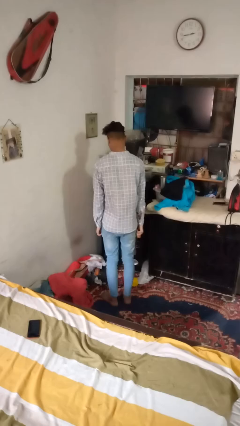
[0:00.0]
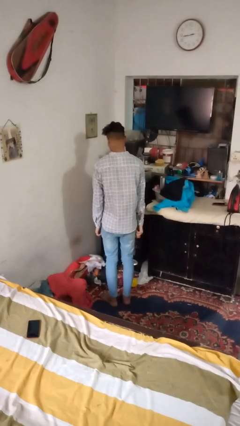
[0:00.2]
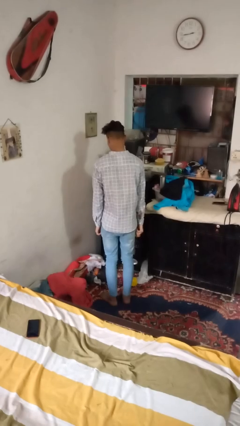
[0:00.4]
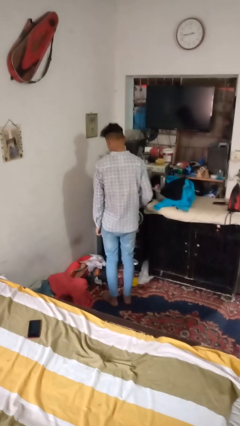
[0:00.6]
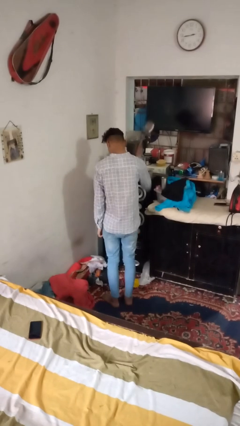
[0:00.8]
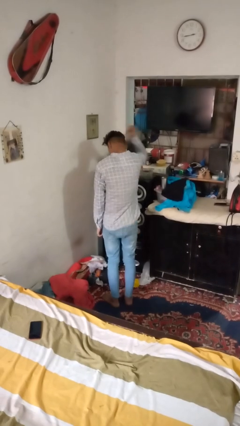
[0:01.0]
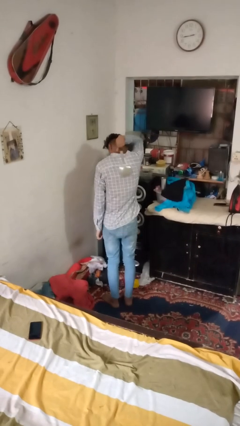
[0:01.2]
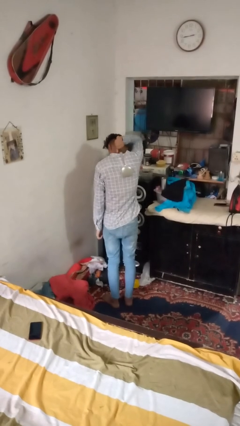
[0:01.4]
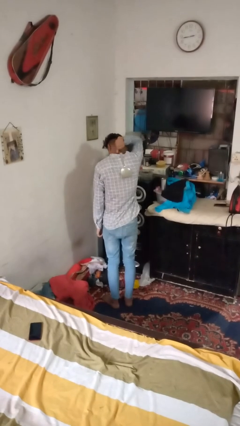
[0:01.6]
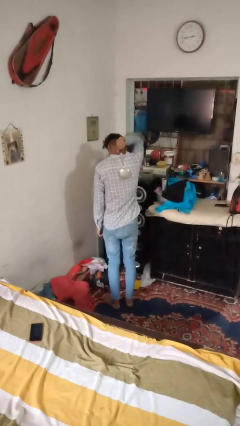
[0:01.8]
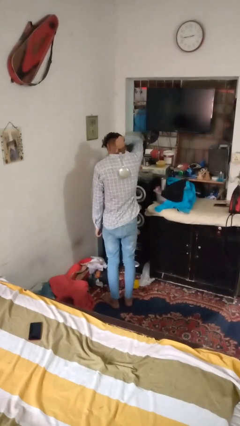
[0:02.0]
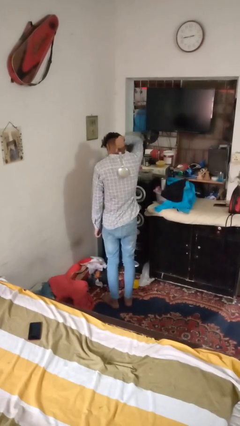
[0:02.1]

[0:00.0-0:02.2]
person swats bug

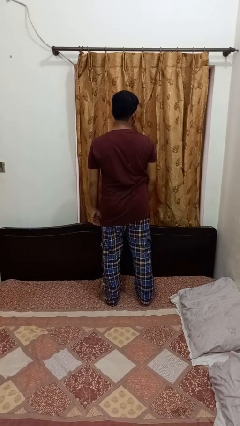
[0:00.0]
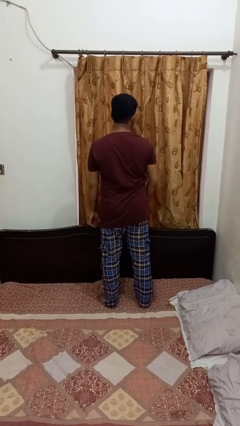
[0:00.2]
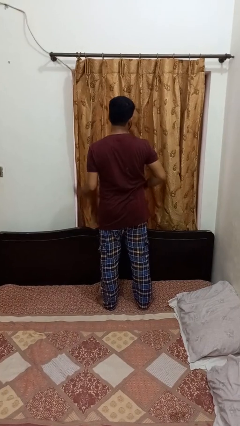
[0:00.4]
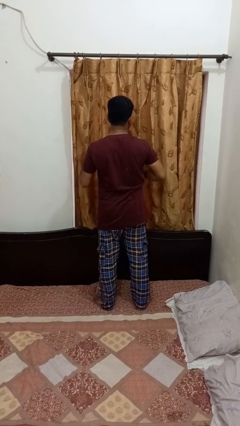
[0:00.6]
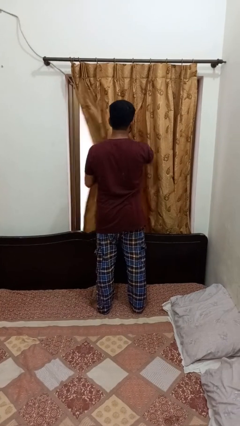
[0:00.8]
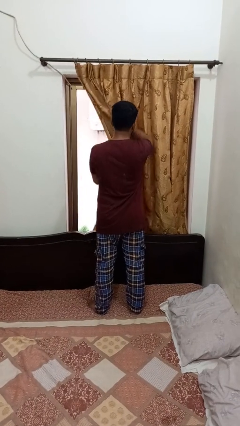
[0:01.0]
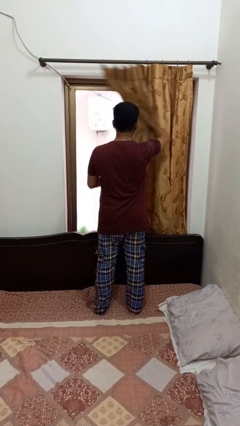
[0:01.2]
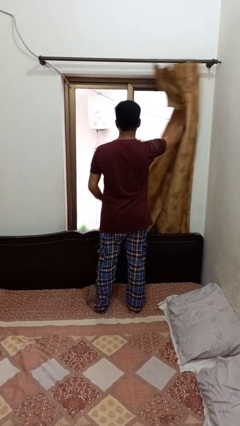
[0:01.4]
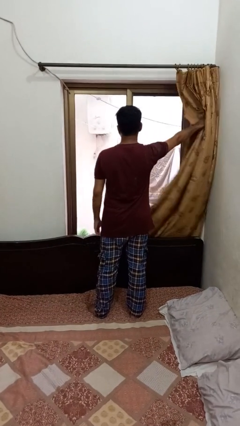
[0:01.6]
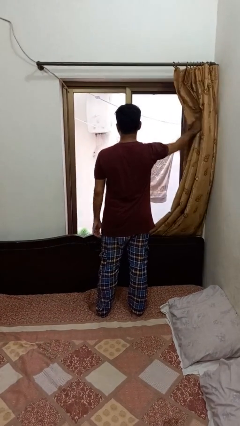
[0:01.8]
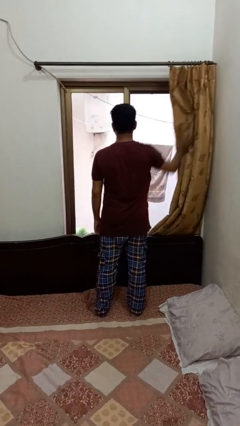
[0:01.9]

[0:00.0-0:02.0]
person opens curtains

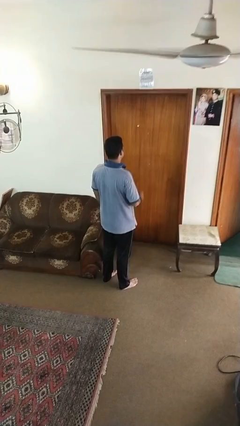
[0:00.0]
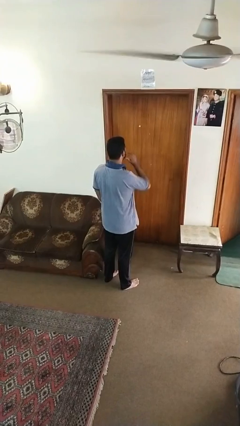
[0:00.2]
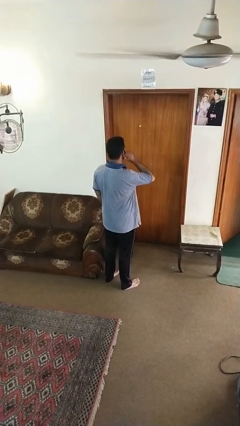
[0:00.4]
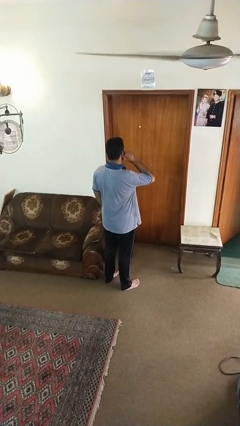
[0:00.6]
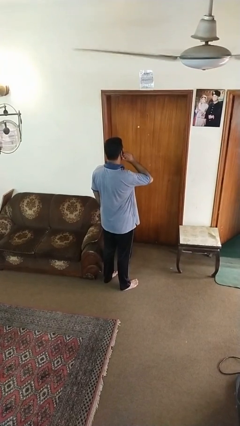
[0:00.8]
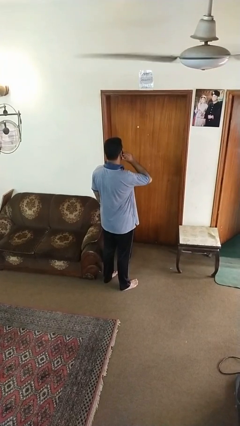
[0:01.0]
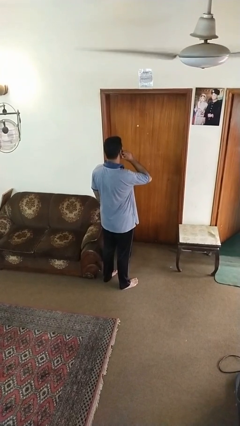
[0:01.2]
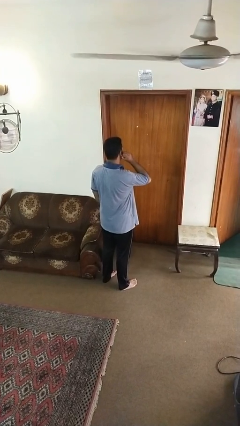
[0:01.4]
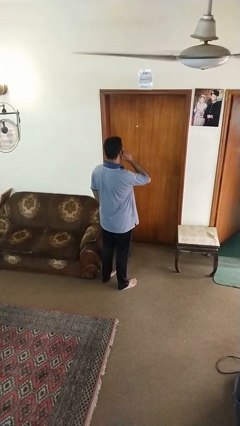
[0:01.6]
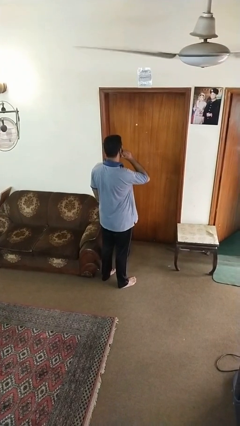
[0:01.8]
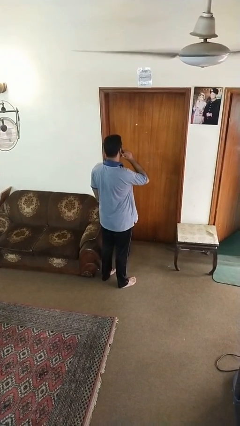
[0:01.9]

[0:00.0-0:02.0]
person touches earlobe

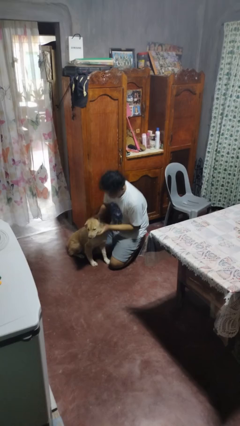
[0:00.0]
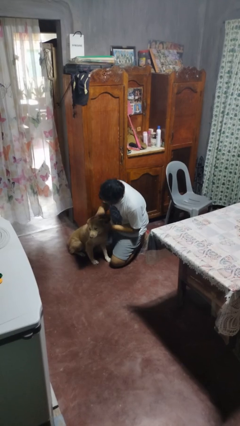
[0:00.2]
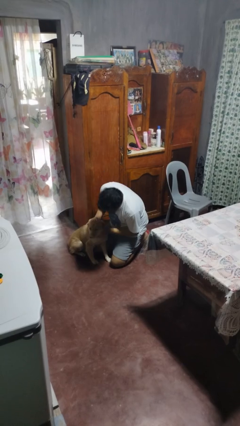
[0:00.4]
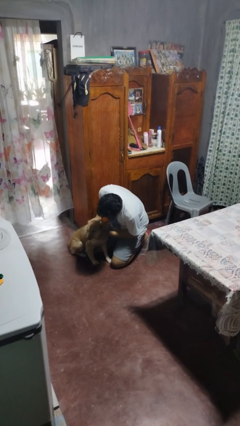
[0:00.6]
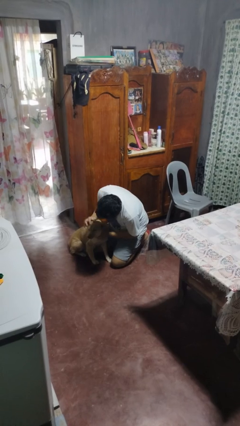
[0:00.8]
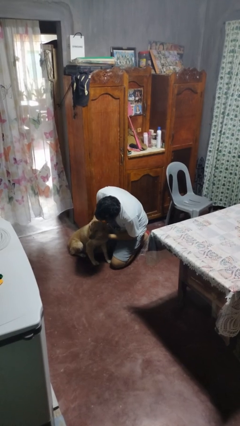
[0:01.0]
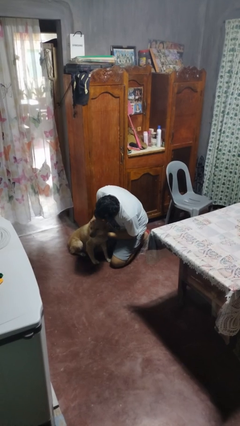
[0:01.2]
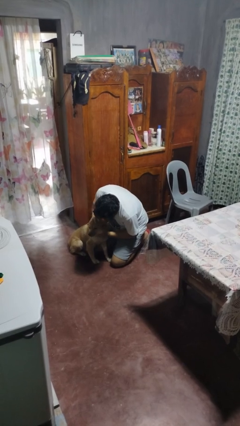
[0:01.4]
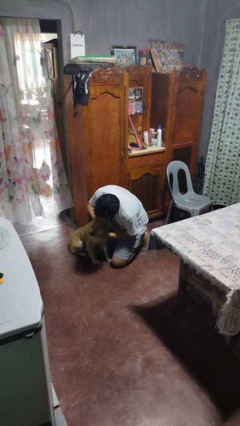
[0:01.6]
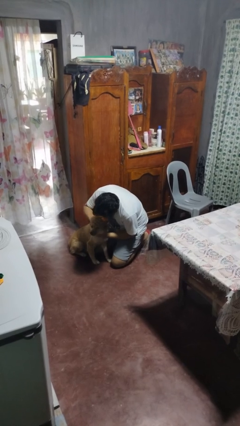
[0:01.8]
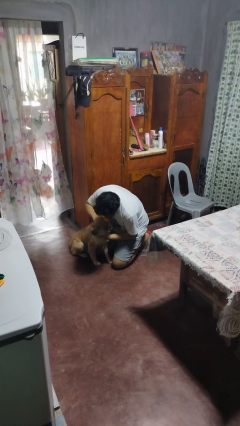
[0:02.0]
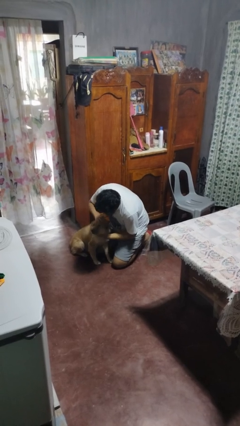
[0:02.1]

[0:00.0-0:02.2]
person pets dog

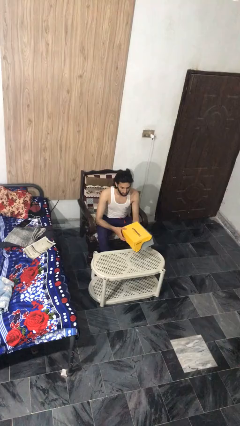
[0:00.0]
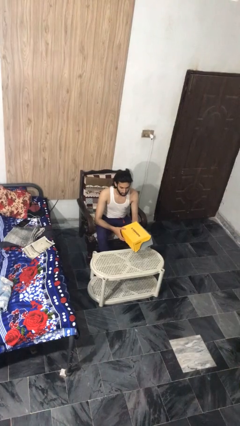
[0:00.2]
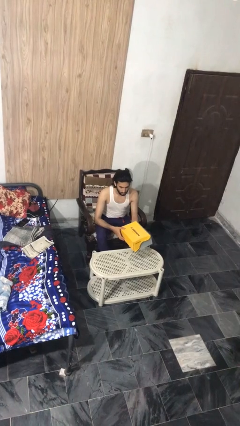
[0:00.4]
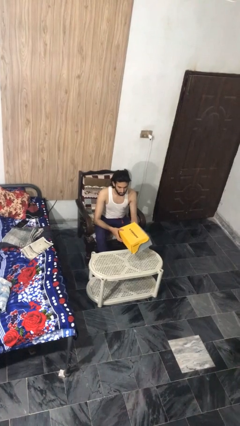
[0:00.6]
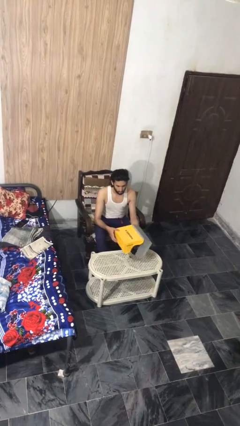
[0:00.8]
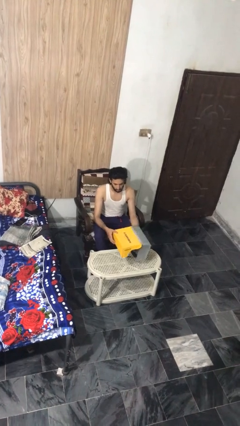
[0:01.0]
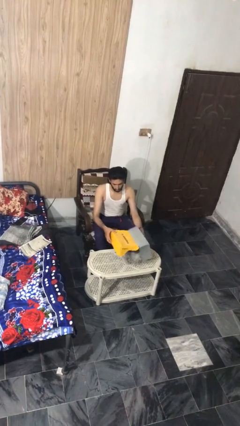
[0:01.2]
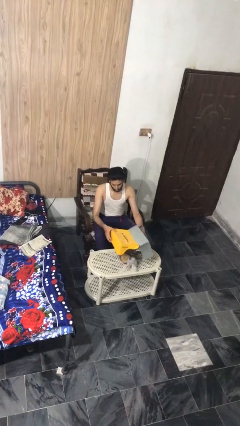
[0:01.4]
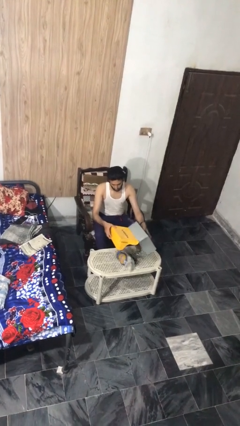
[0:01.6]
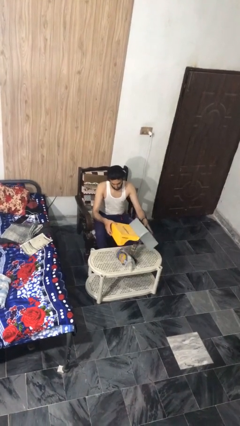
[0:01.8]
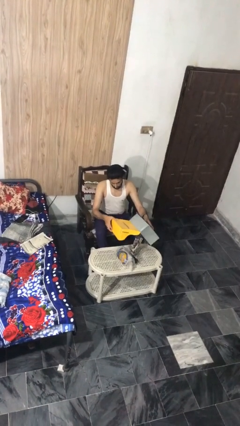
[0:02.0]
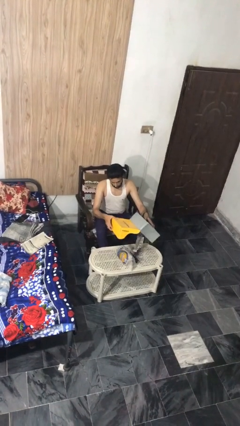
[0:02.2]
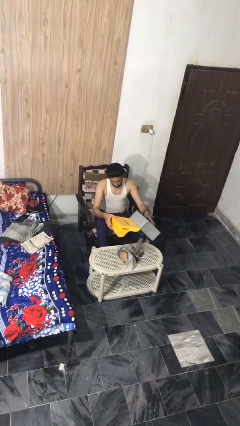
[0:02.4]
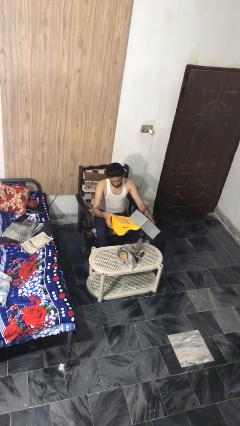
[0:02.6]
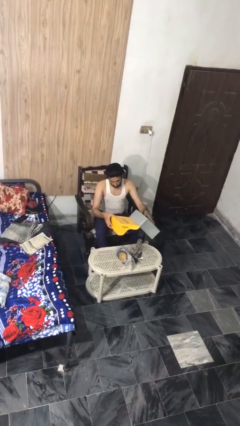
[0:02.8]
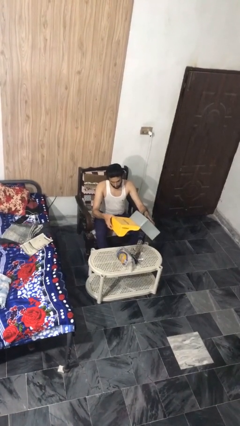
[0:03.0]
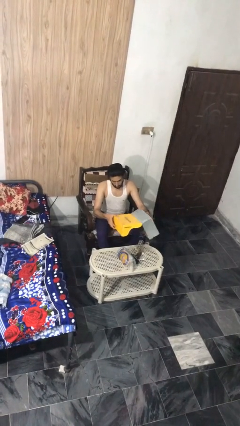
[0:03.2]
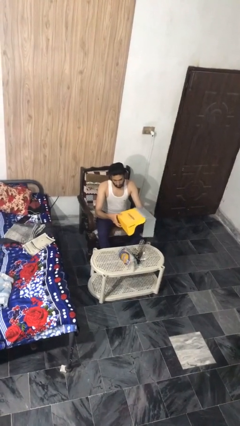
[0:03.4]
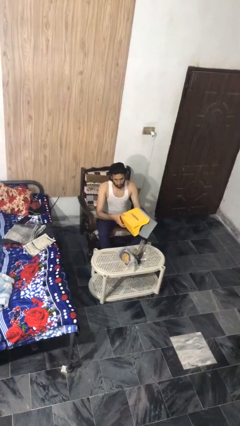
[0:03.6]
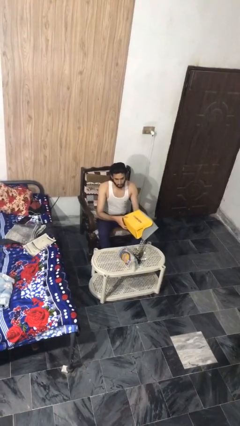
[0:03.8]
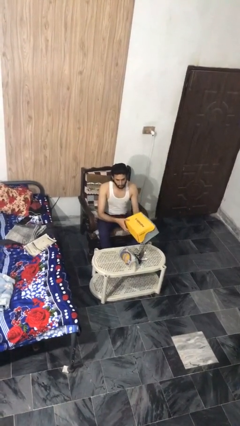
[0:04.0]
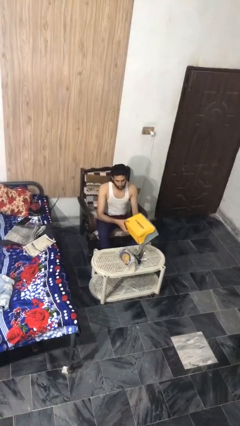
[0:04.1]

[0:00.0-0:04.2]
person unloads box onto table

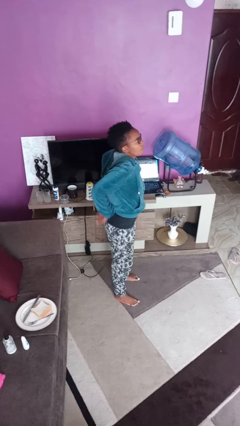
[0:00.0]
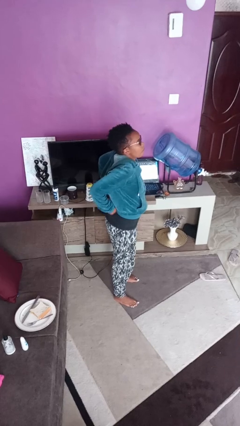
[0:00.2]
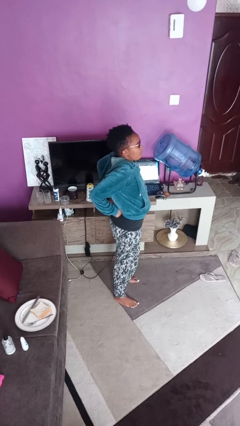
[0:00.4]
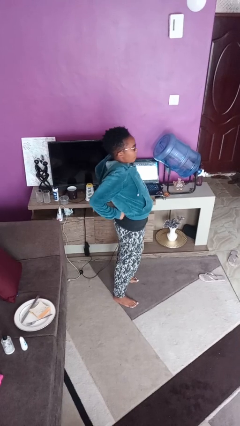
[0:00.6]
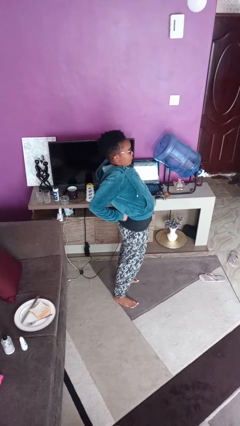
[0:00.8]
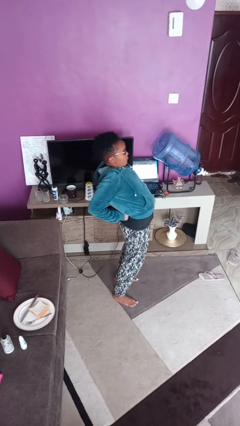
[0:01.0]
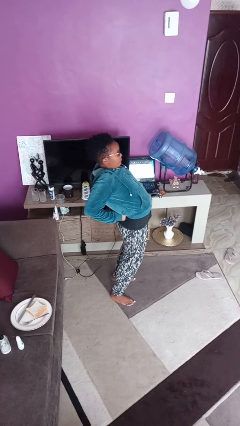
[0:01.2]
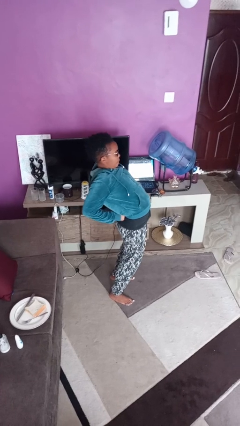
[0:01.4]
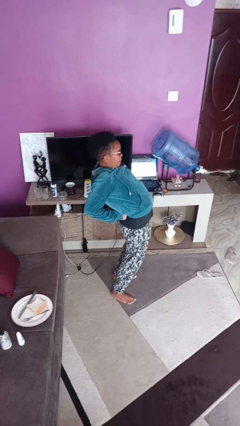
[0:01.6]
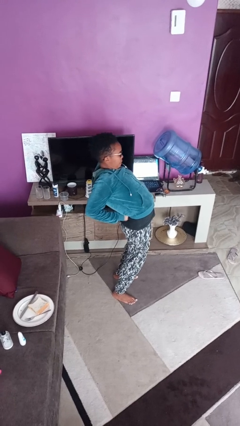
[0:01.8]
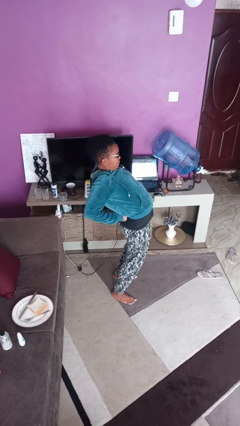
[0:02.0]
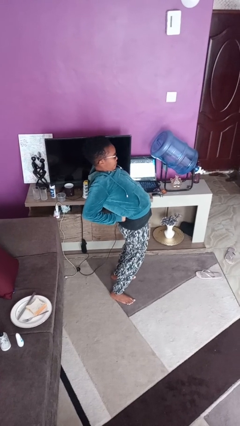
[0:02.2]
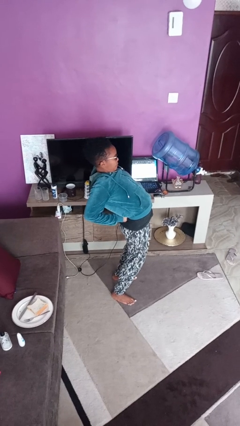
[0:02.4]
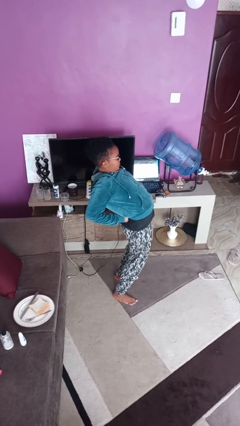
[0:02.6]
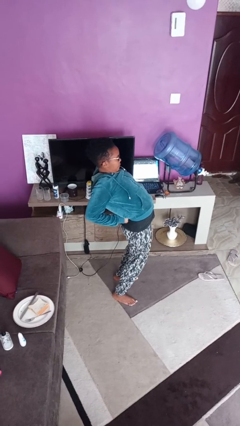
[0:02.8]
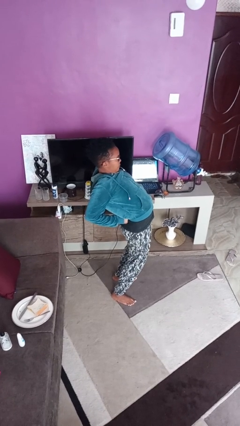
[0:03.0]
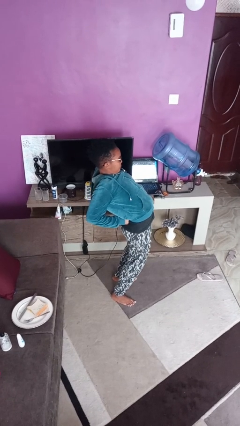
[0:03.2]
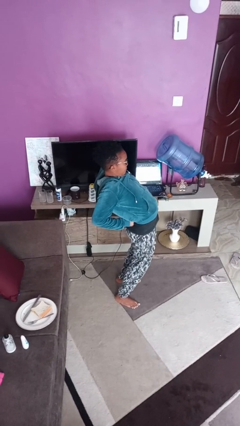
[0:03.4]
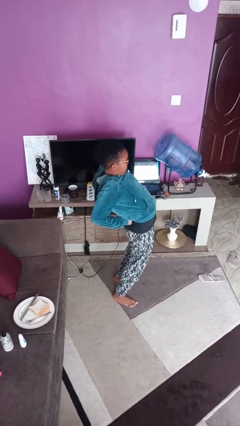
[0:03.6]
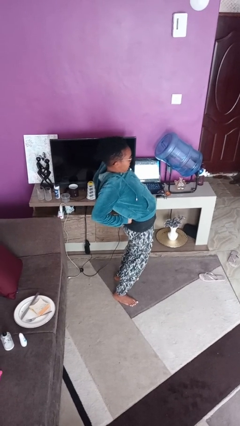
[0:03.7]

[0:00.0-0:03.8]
person stretches back

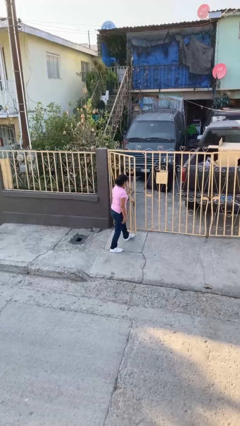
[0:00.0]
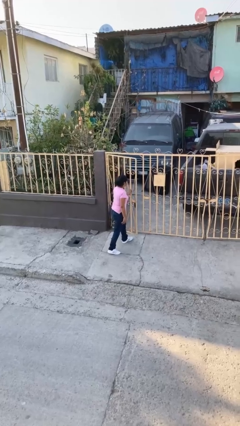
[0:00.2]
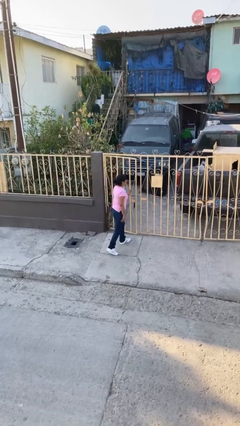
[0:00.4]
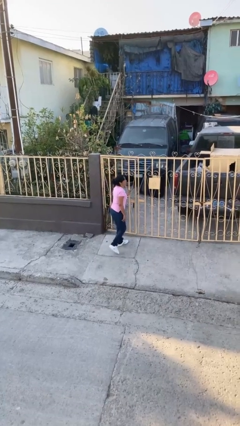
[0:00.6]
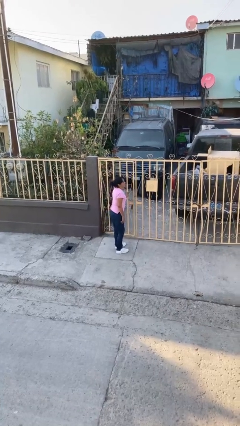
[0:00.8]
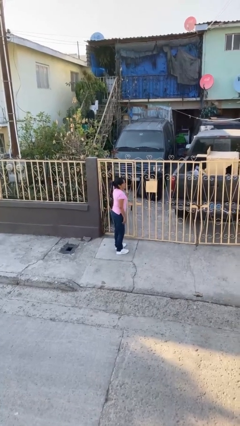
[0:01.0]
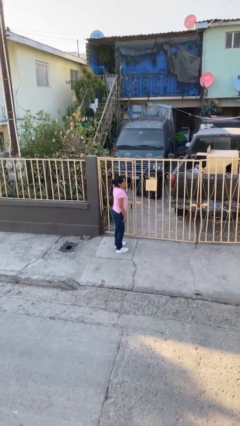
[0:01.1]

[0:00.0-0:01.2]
person closes facility door
